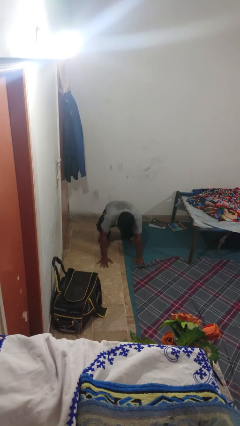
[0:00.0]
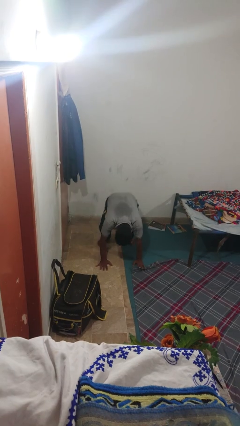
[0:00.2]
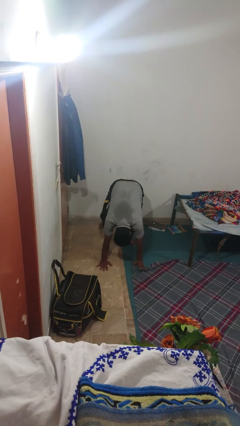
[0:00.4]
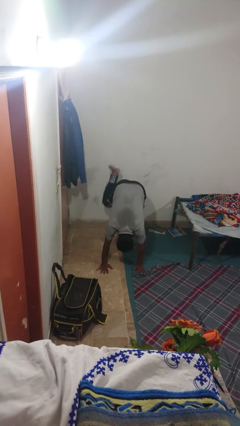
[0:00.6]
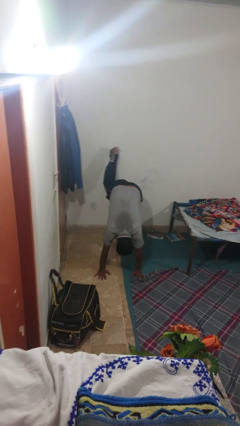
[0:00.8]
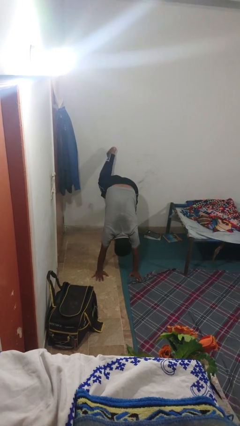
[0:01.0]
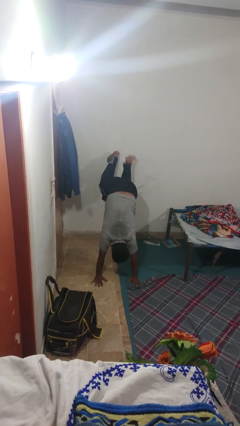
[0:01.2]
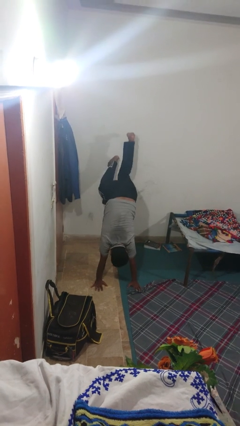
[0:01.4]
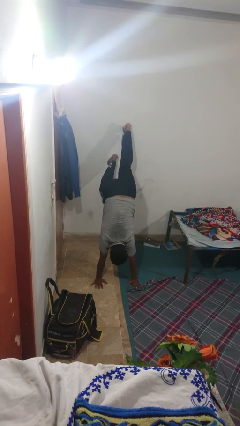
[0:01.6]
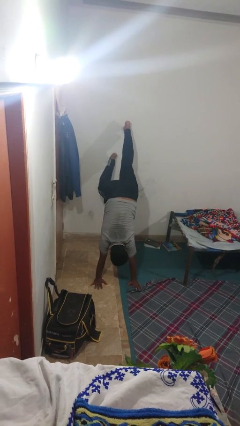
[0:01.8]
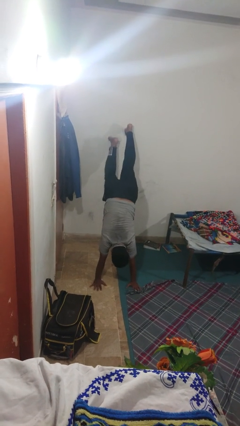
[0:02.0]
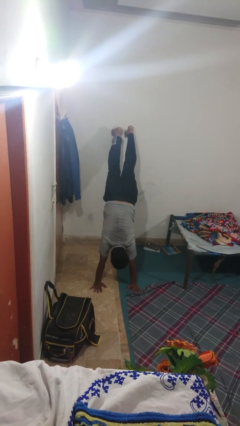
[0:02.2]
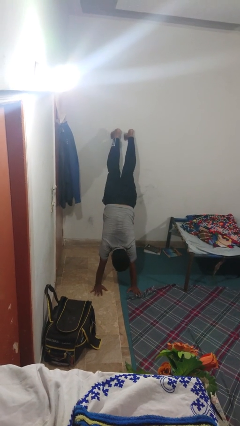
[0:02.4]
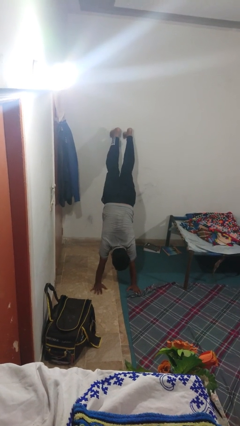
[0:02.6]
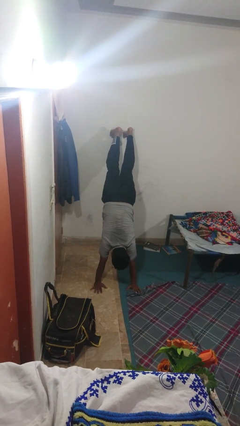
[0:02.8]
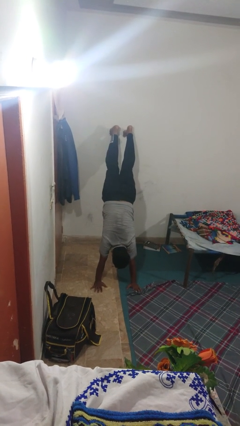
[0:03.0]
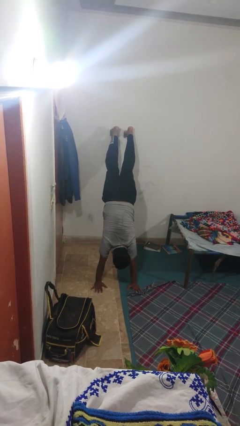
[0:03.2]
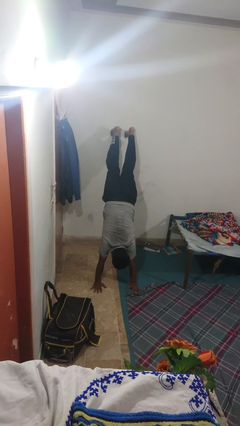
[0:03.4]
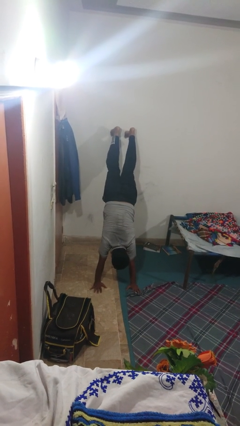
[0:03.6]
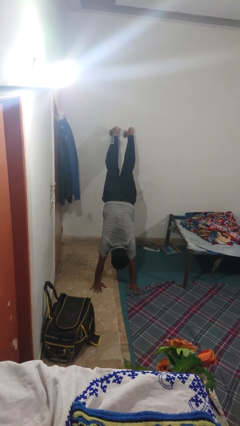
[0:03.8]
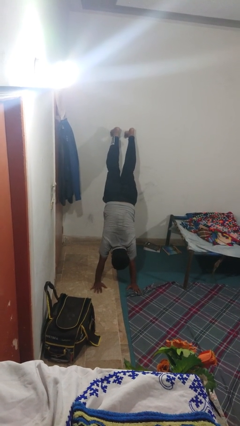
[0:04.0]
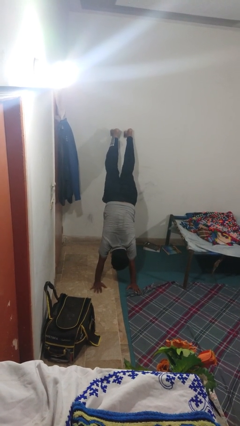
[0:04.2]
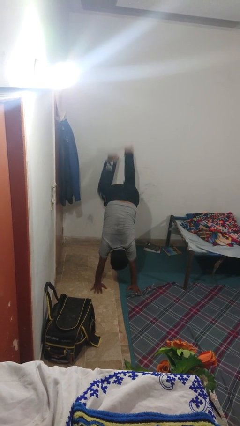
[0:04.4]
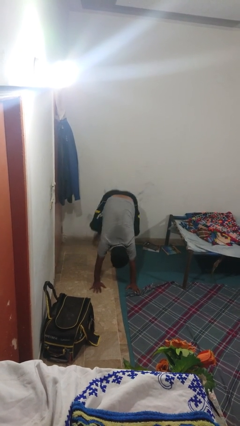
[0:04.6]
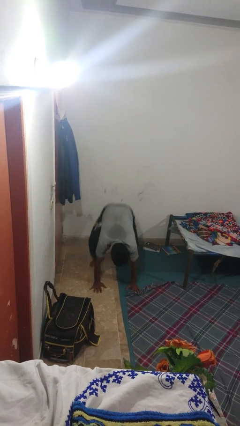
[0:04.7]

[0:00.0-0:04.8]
person handstand

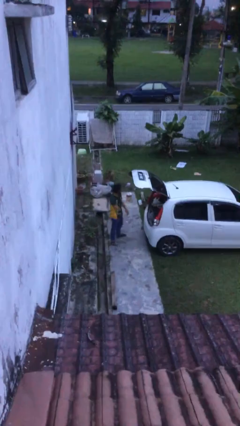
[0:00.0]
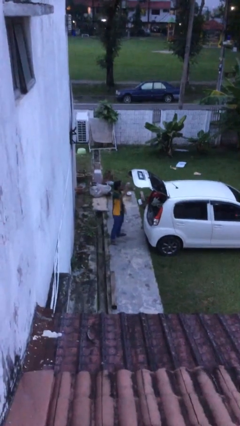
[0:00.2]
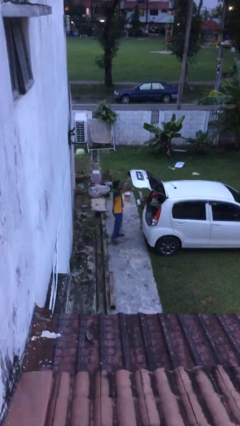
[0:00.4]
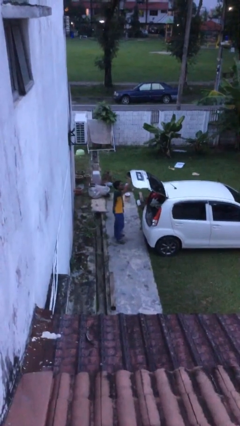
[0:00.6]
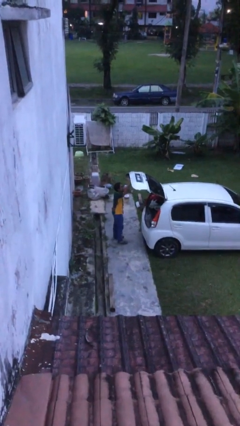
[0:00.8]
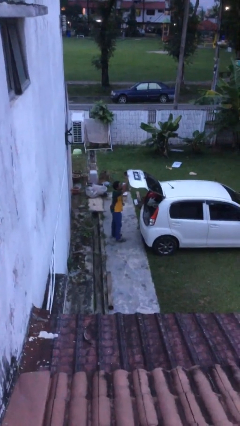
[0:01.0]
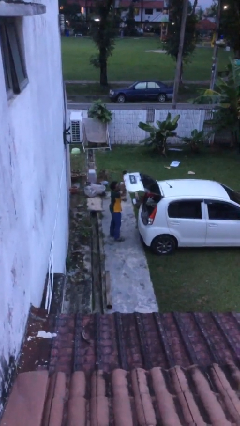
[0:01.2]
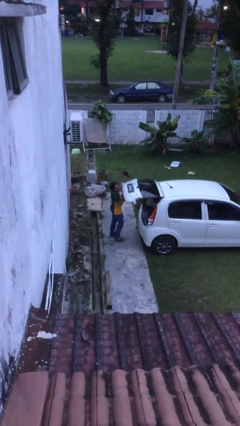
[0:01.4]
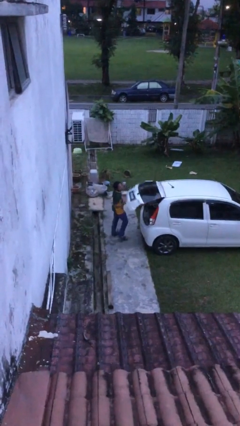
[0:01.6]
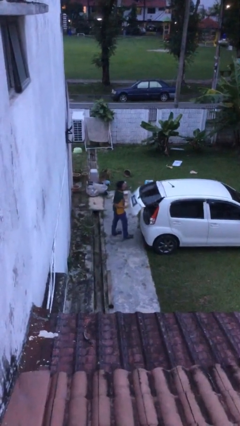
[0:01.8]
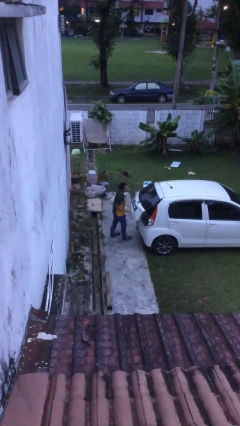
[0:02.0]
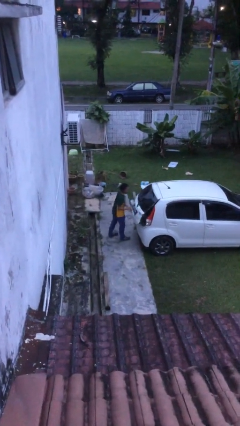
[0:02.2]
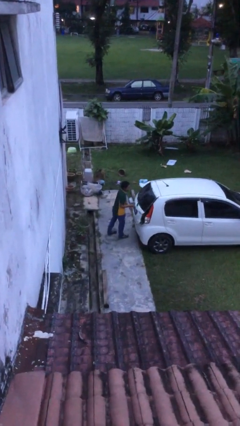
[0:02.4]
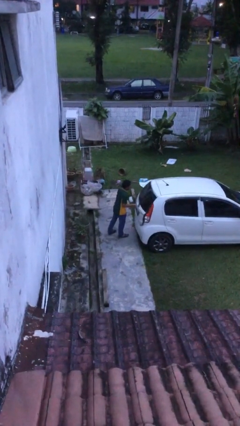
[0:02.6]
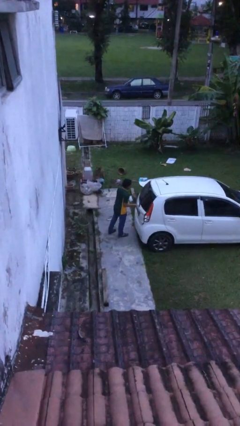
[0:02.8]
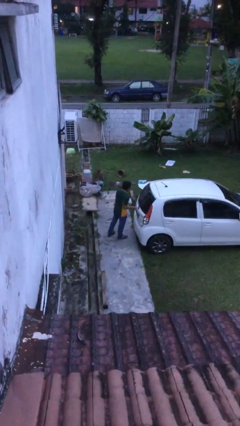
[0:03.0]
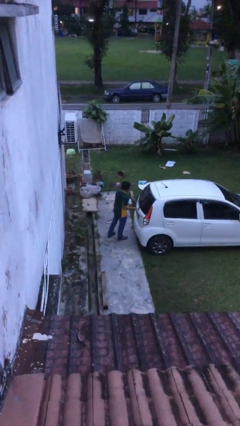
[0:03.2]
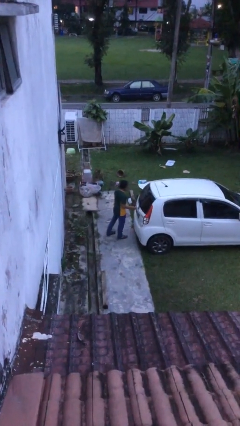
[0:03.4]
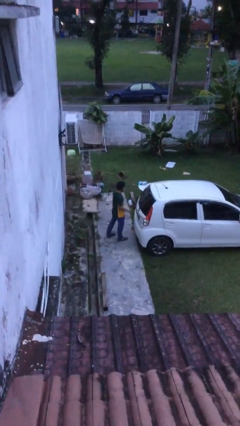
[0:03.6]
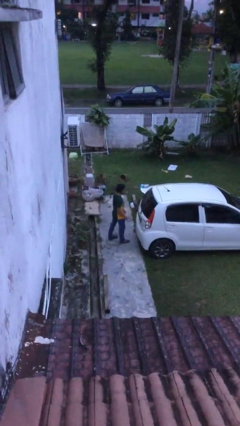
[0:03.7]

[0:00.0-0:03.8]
person closes car trunk

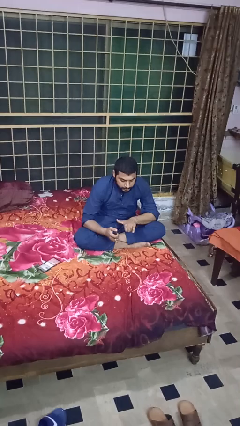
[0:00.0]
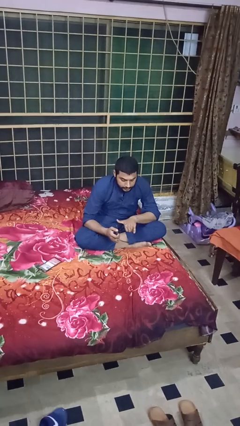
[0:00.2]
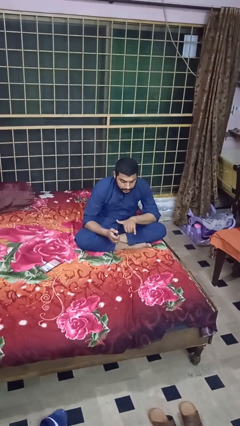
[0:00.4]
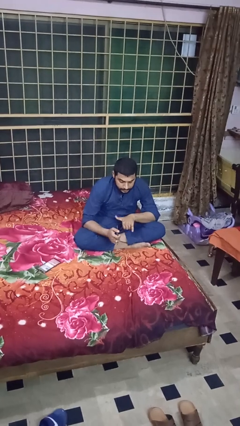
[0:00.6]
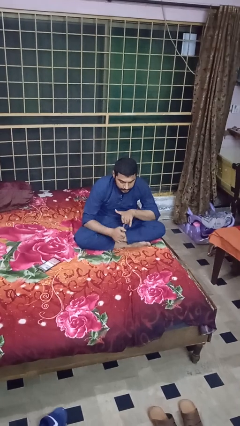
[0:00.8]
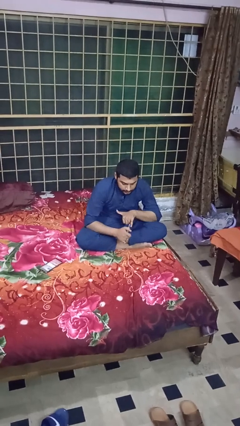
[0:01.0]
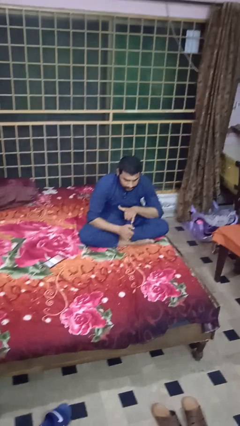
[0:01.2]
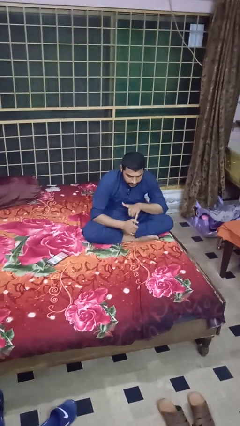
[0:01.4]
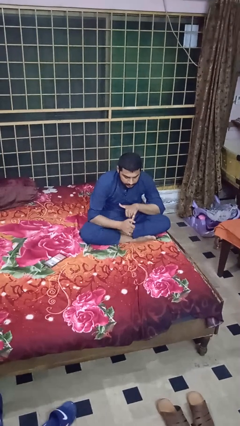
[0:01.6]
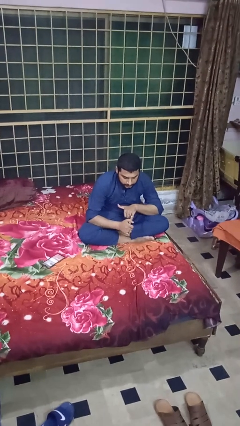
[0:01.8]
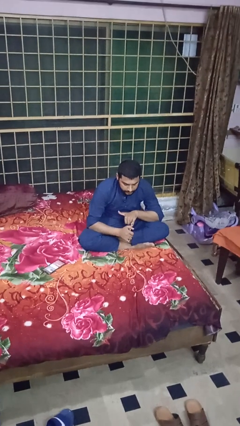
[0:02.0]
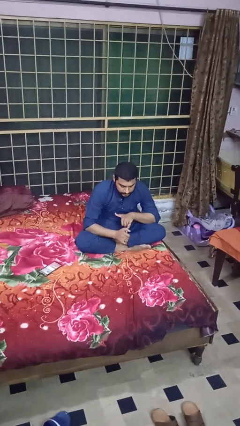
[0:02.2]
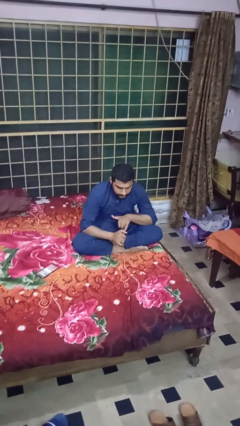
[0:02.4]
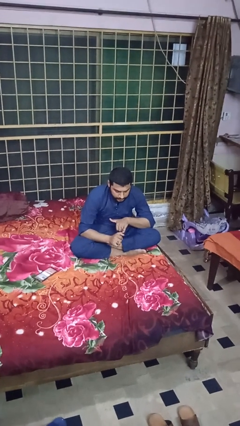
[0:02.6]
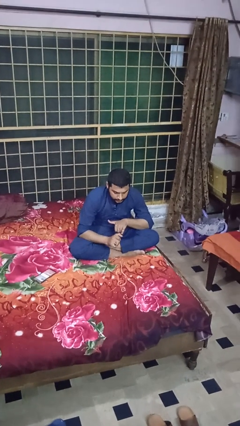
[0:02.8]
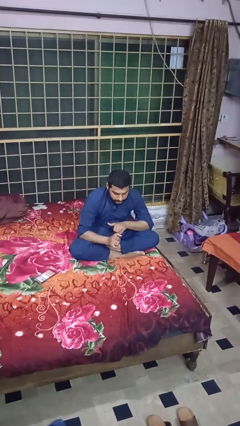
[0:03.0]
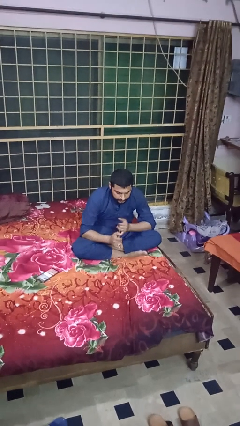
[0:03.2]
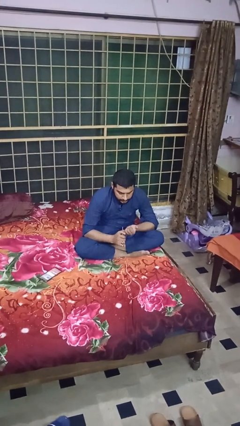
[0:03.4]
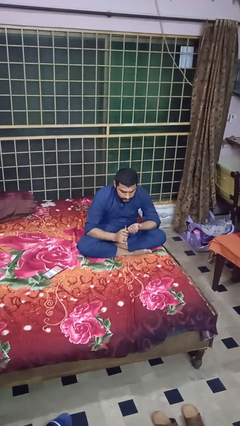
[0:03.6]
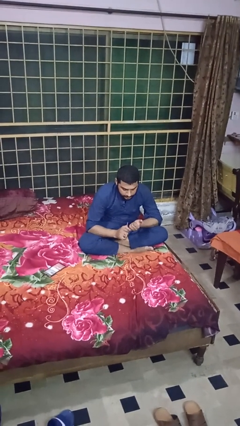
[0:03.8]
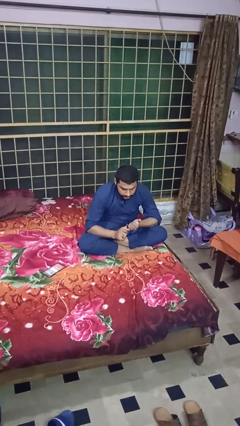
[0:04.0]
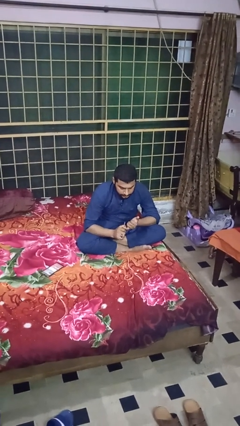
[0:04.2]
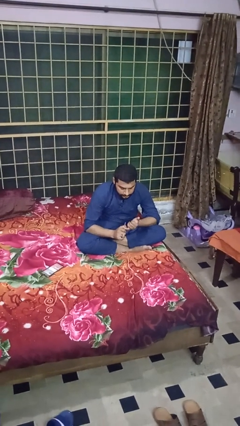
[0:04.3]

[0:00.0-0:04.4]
person files fingernails

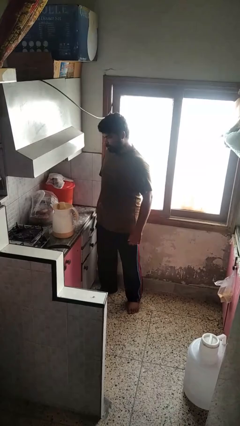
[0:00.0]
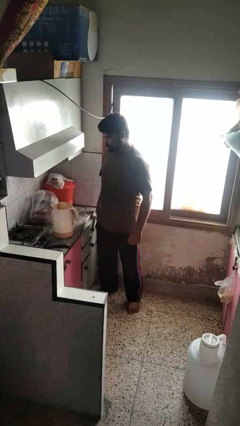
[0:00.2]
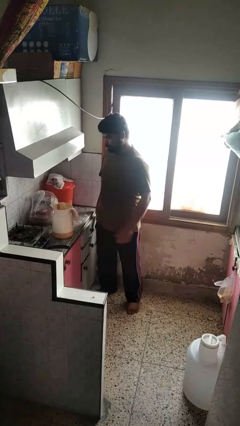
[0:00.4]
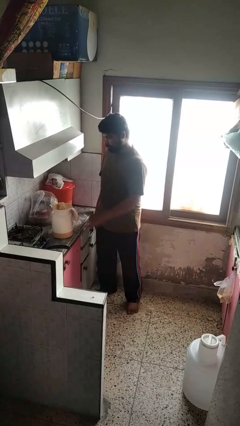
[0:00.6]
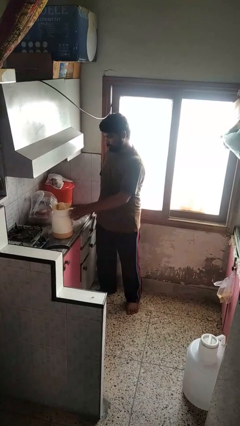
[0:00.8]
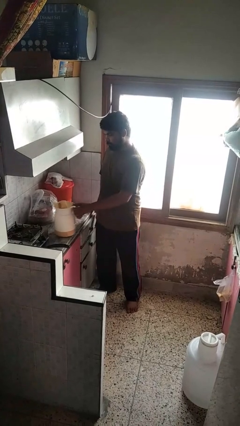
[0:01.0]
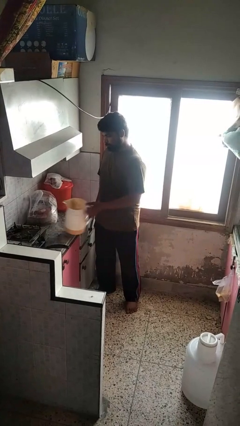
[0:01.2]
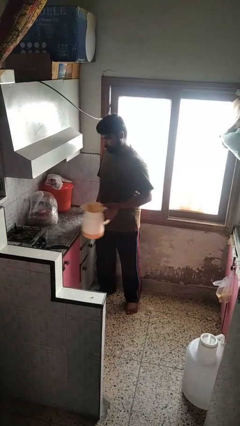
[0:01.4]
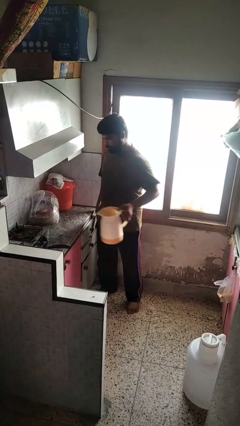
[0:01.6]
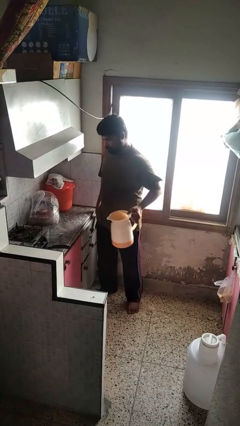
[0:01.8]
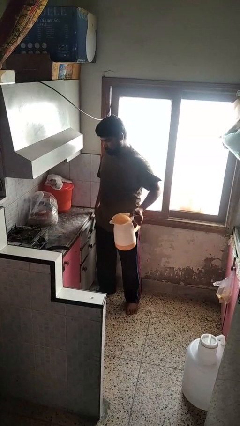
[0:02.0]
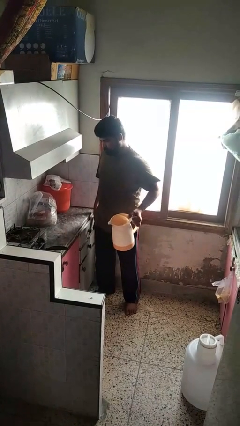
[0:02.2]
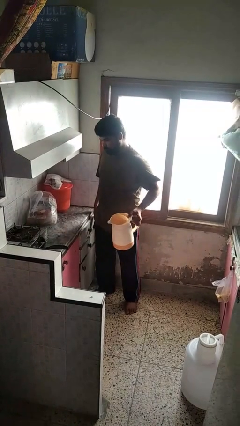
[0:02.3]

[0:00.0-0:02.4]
person picks up object from countertop

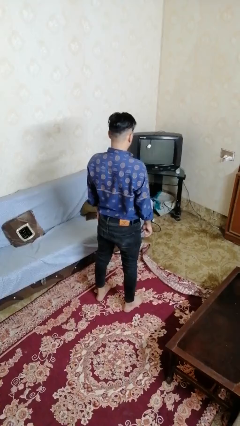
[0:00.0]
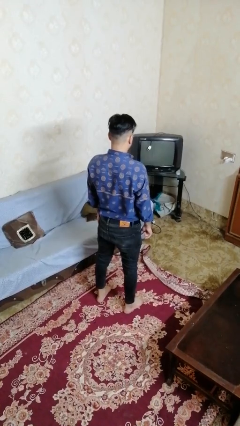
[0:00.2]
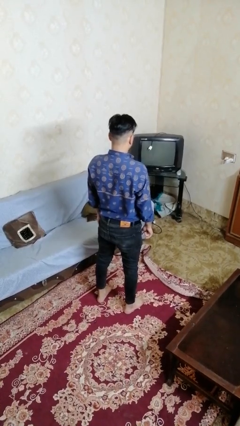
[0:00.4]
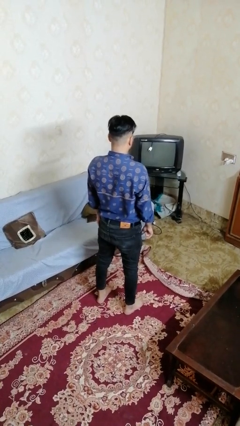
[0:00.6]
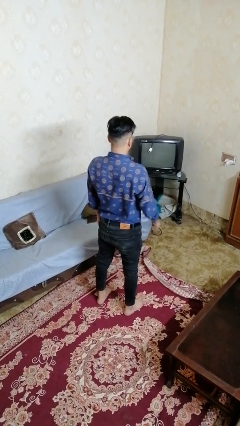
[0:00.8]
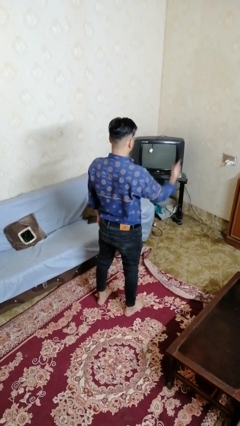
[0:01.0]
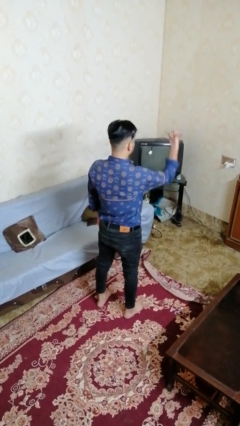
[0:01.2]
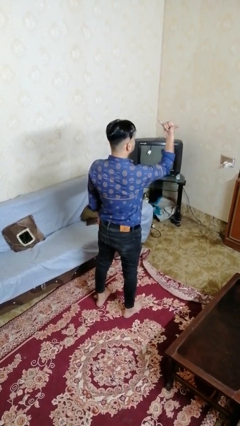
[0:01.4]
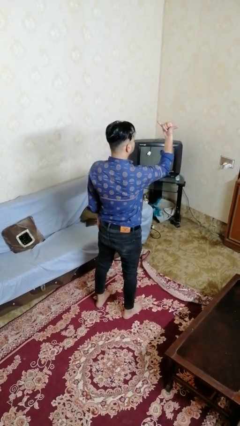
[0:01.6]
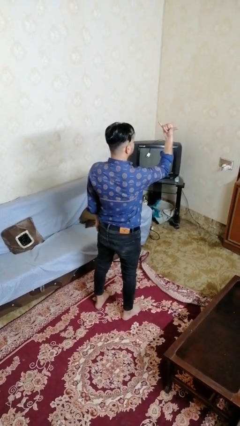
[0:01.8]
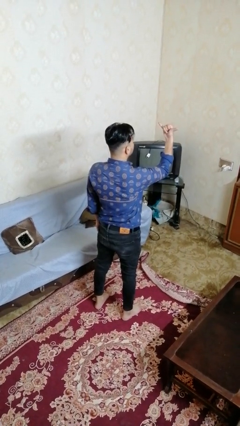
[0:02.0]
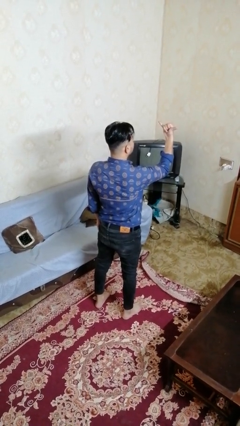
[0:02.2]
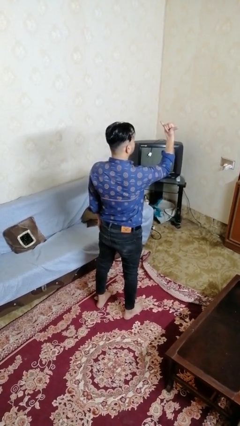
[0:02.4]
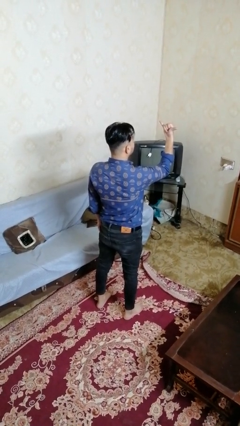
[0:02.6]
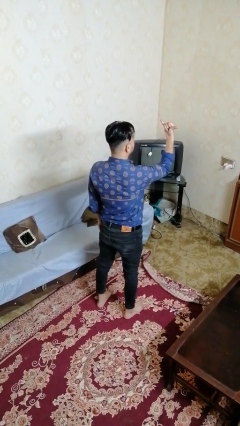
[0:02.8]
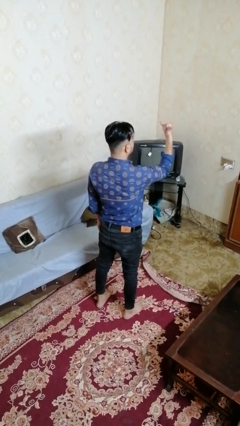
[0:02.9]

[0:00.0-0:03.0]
person gestures hang loose
